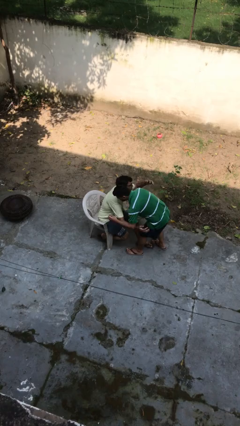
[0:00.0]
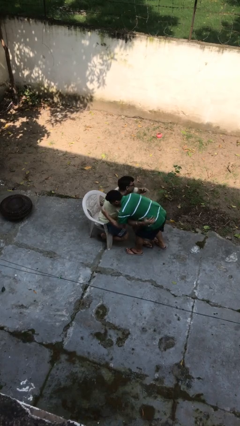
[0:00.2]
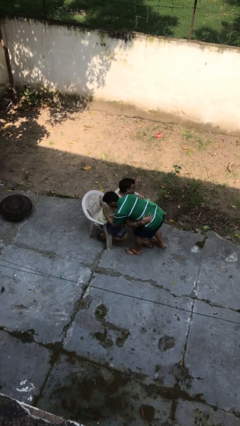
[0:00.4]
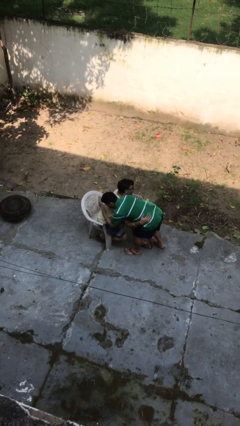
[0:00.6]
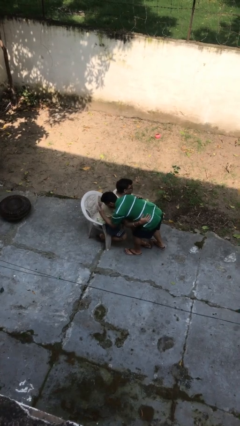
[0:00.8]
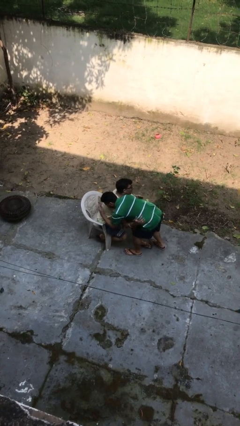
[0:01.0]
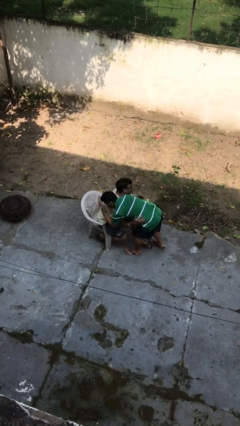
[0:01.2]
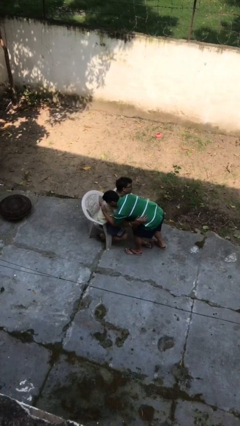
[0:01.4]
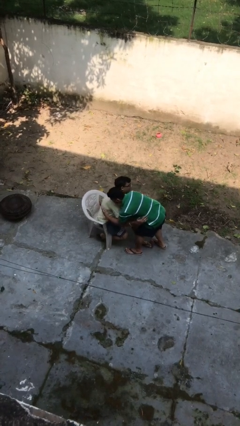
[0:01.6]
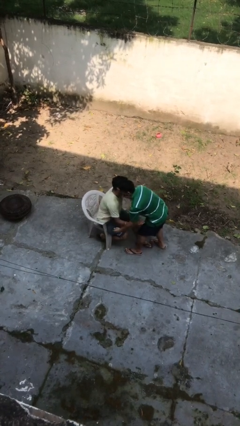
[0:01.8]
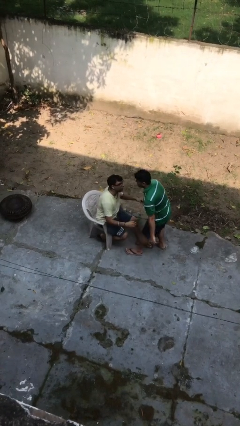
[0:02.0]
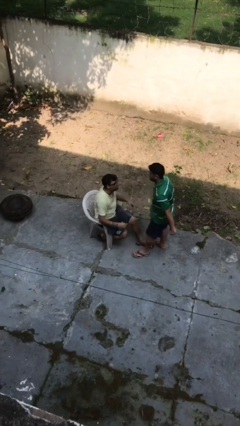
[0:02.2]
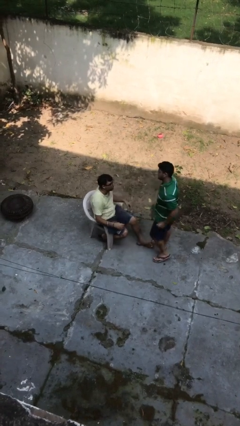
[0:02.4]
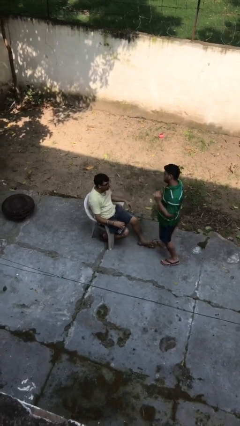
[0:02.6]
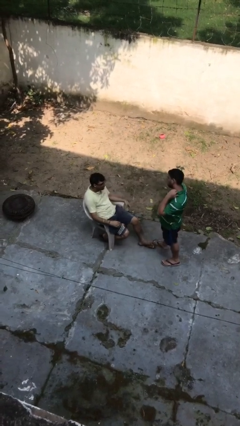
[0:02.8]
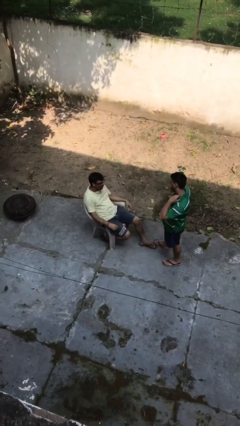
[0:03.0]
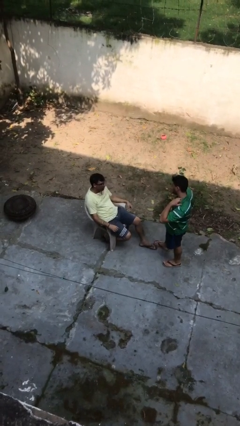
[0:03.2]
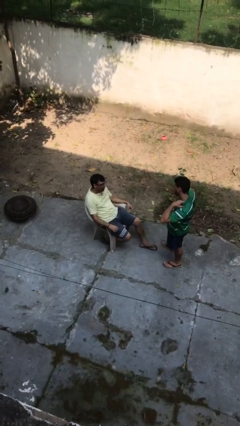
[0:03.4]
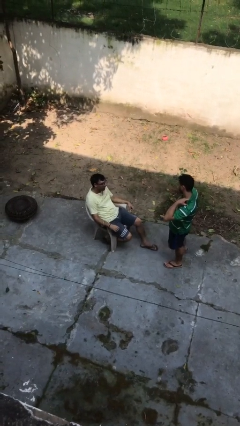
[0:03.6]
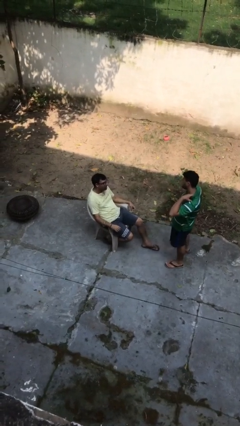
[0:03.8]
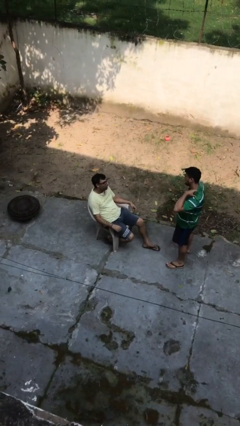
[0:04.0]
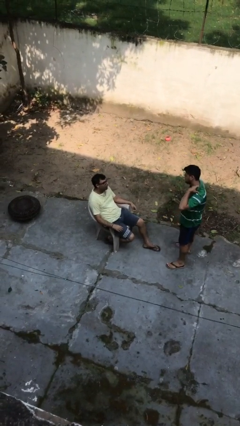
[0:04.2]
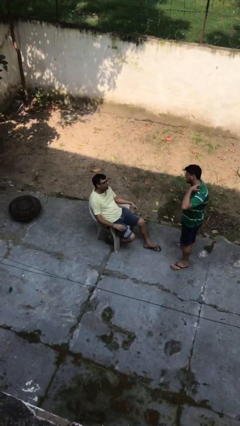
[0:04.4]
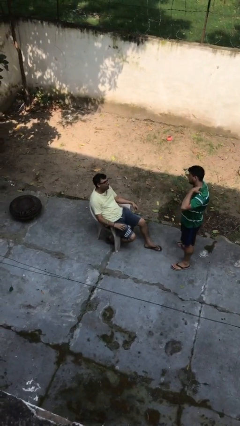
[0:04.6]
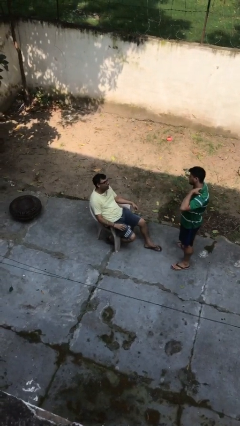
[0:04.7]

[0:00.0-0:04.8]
person embraces person

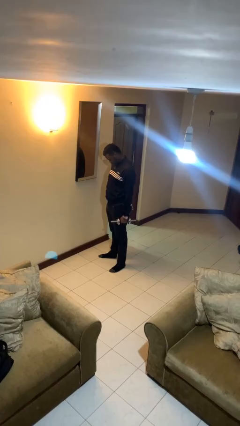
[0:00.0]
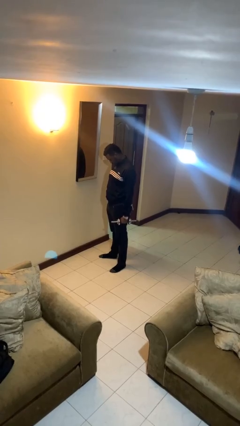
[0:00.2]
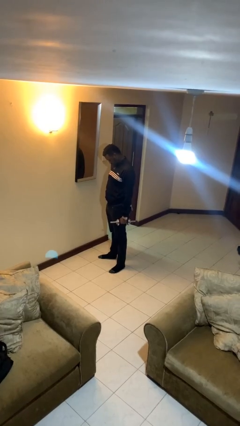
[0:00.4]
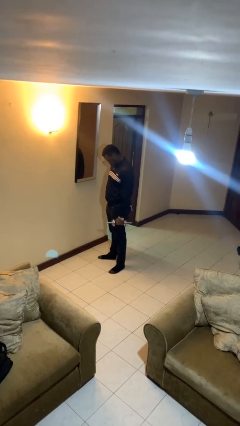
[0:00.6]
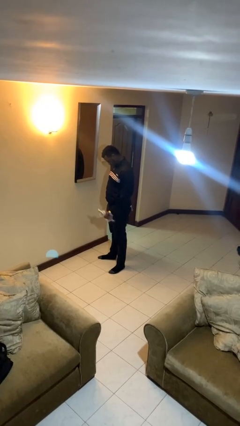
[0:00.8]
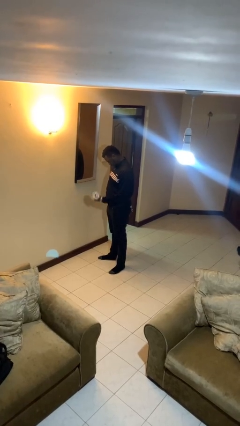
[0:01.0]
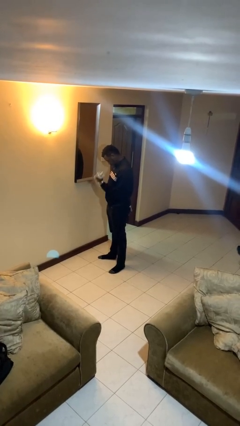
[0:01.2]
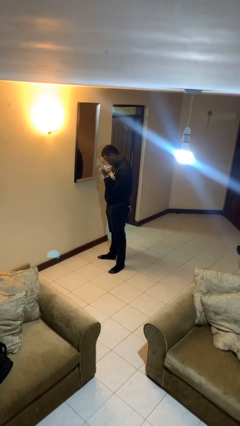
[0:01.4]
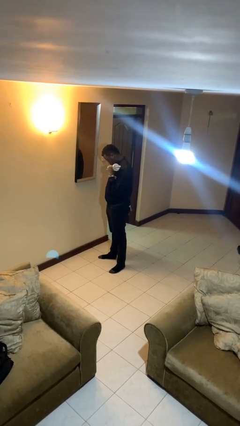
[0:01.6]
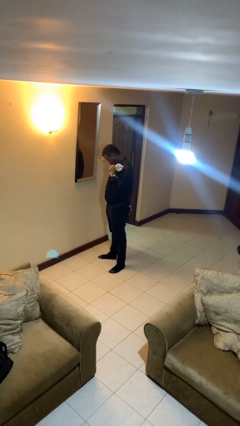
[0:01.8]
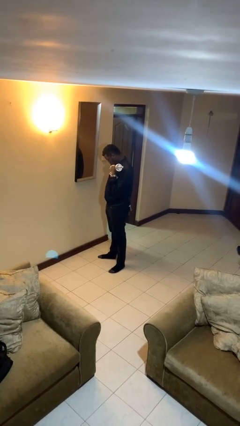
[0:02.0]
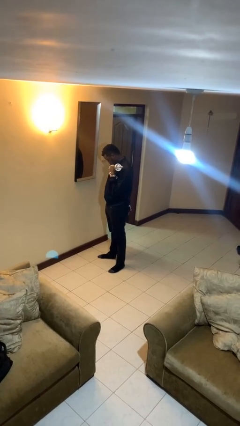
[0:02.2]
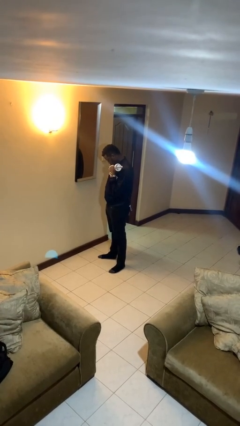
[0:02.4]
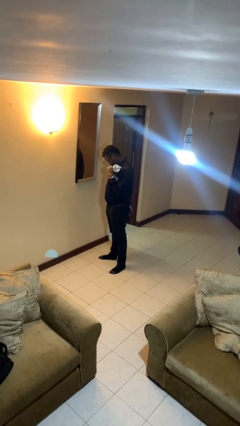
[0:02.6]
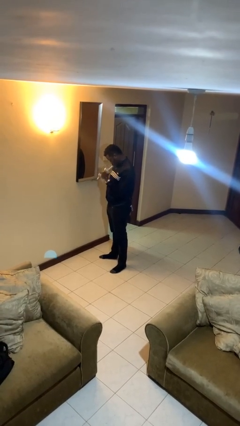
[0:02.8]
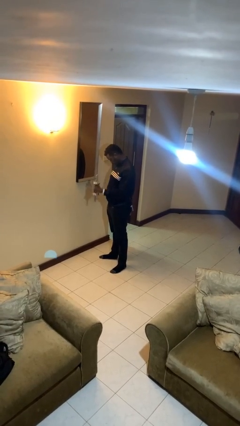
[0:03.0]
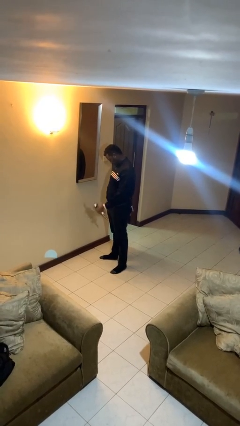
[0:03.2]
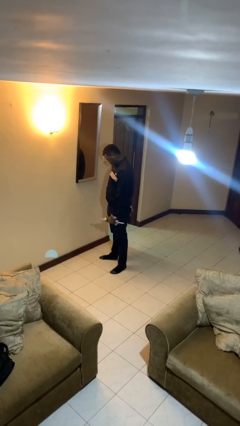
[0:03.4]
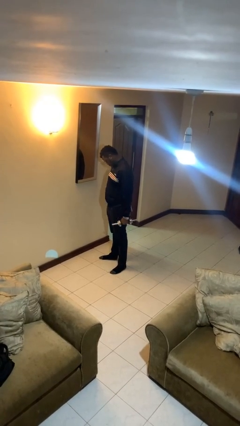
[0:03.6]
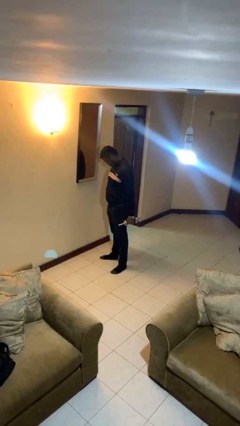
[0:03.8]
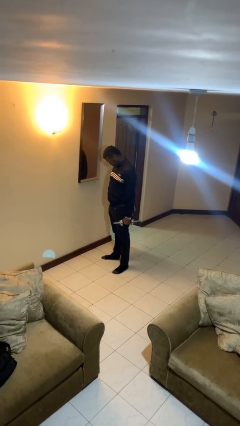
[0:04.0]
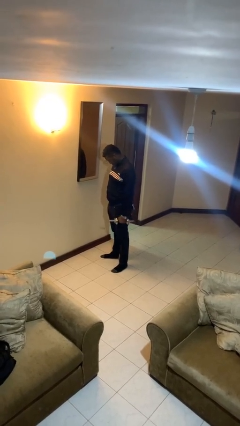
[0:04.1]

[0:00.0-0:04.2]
person lifts dumbbells

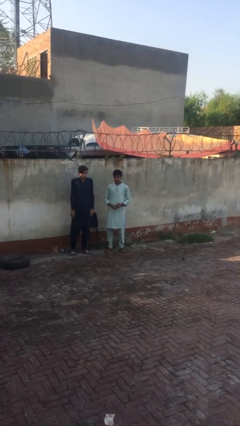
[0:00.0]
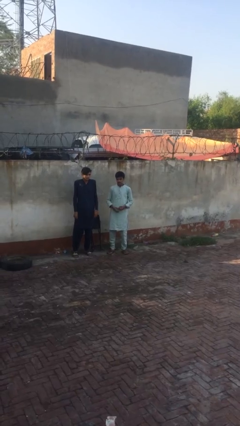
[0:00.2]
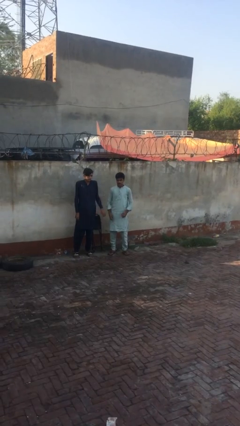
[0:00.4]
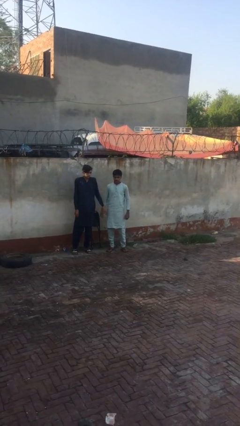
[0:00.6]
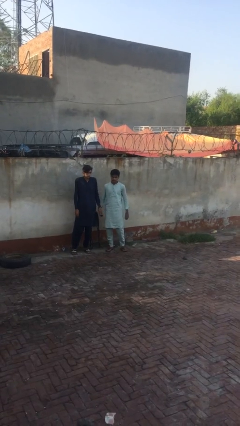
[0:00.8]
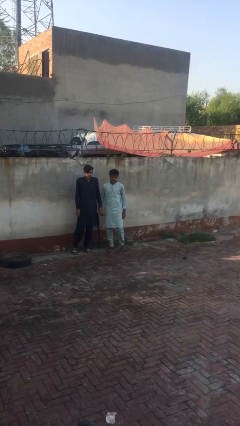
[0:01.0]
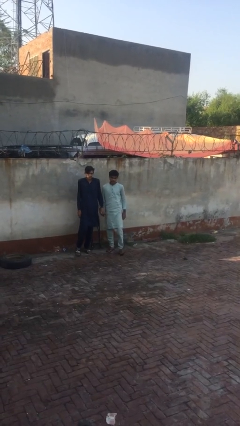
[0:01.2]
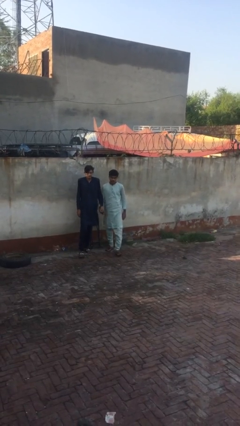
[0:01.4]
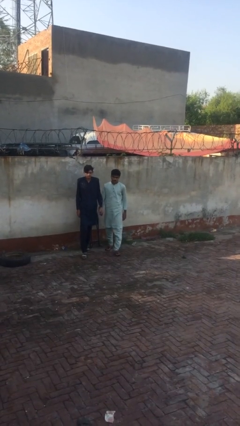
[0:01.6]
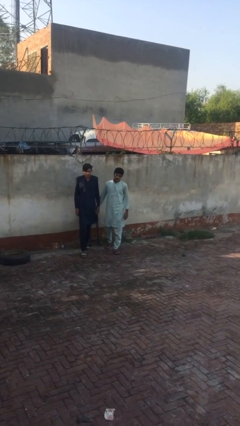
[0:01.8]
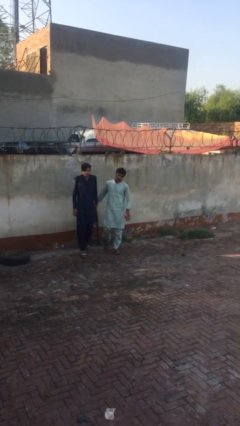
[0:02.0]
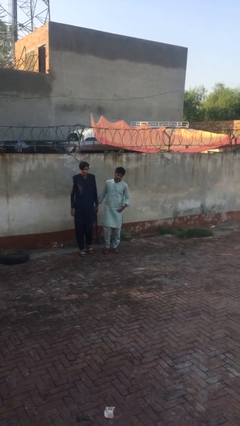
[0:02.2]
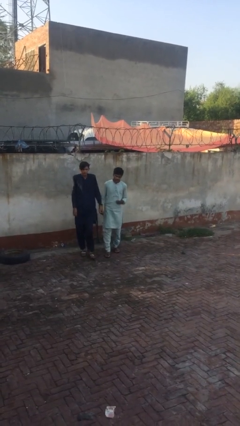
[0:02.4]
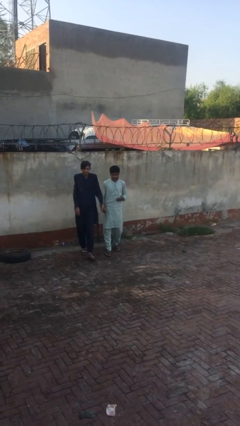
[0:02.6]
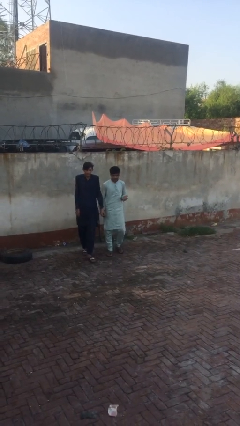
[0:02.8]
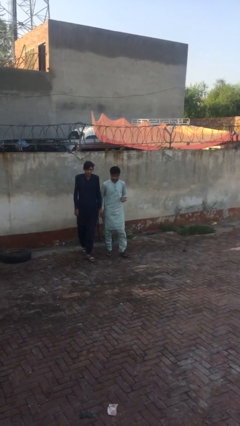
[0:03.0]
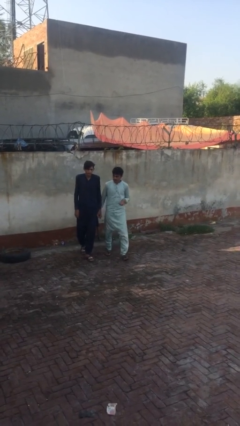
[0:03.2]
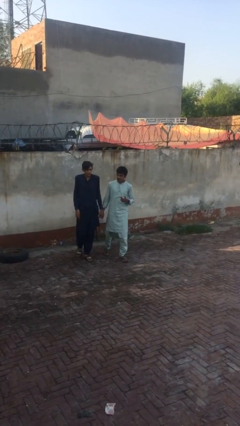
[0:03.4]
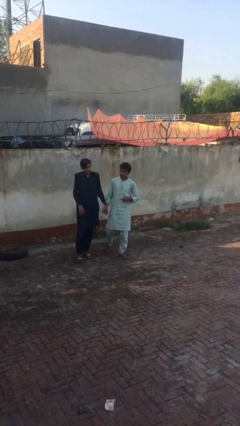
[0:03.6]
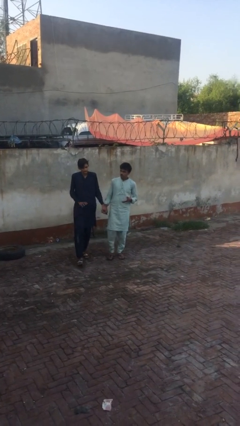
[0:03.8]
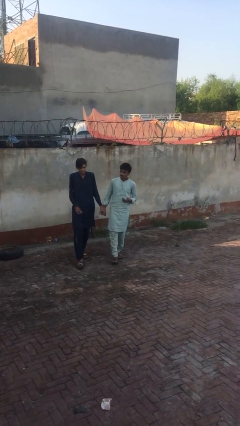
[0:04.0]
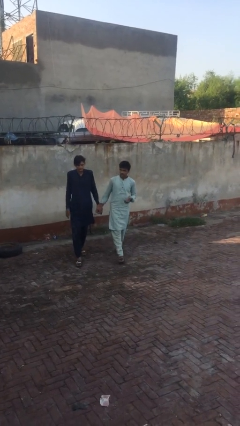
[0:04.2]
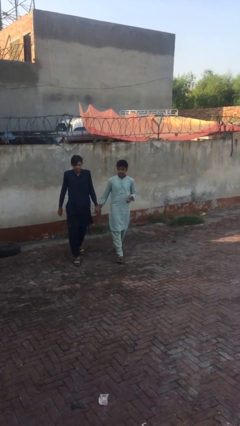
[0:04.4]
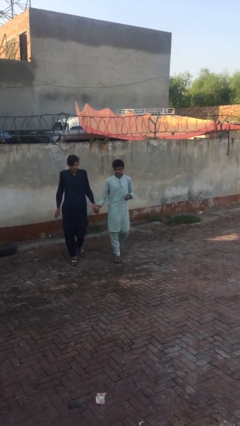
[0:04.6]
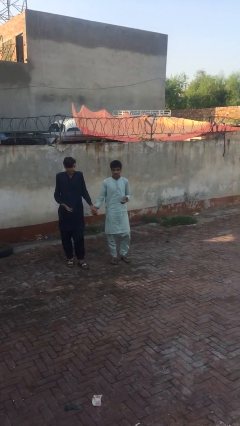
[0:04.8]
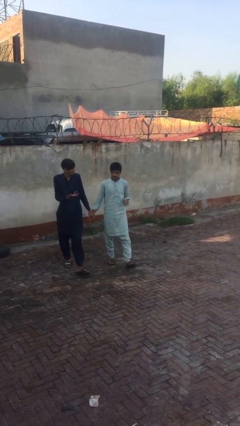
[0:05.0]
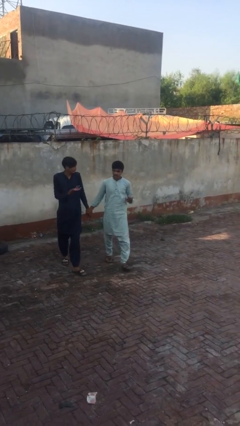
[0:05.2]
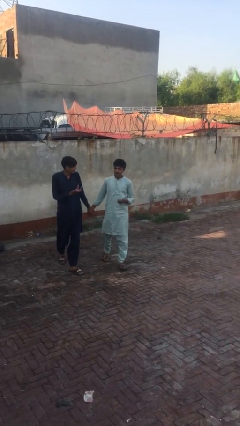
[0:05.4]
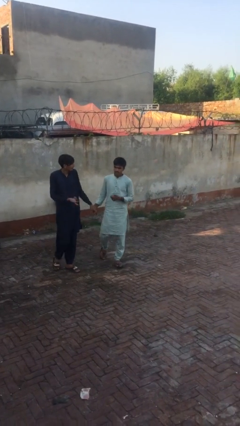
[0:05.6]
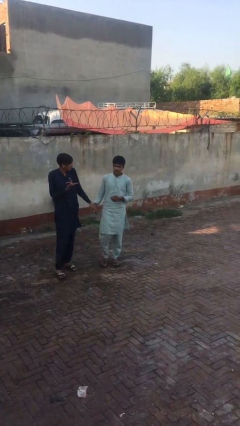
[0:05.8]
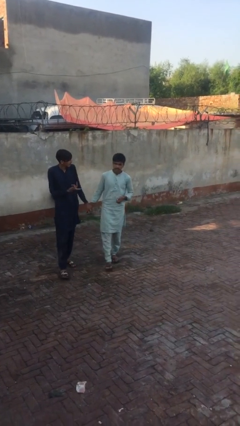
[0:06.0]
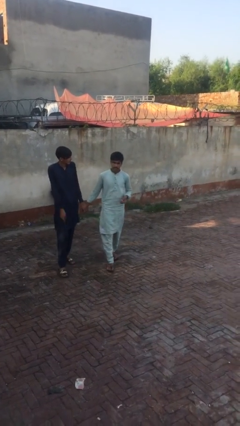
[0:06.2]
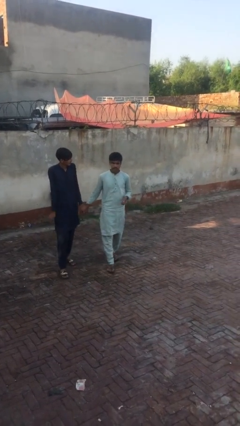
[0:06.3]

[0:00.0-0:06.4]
person holds hand

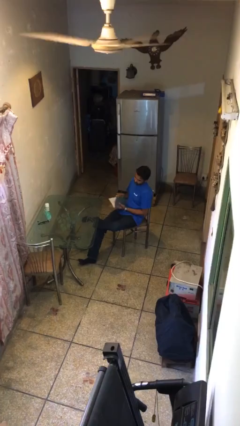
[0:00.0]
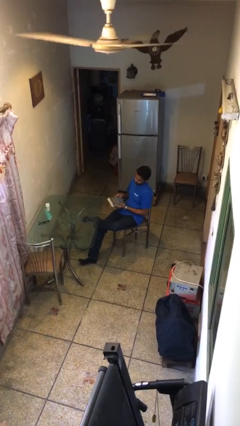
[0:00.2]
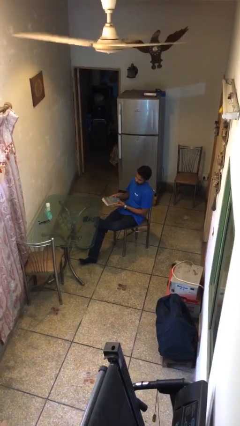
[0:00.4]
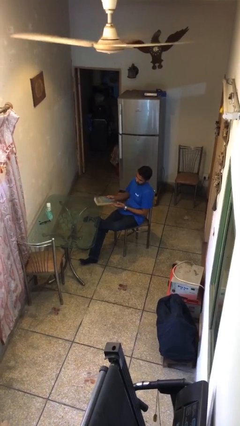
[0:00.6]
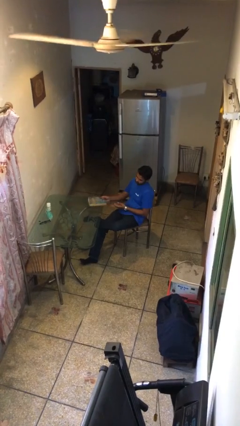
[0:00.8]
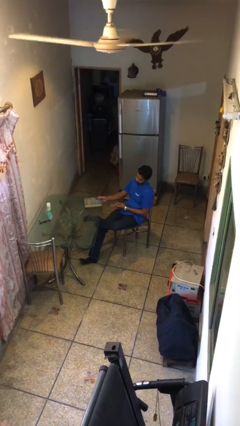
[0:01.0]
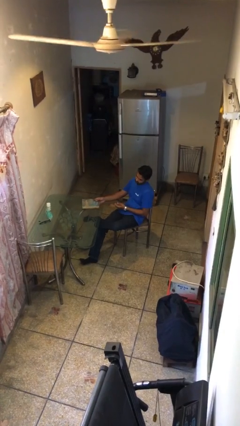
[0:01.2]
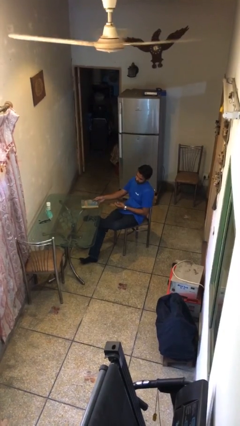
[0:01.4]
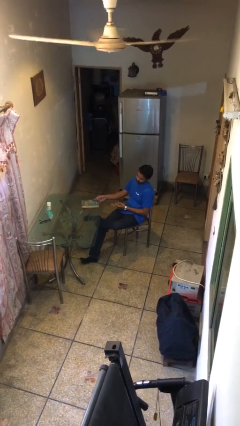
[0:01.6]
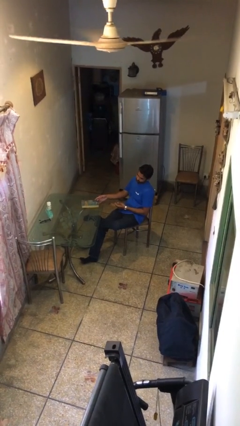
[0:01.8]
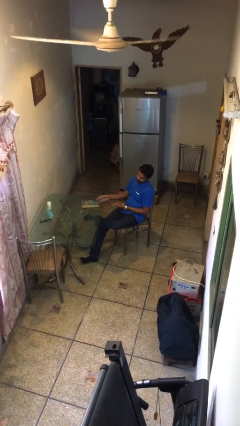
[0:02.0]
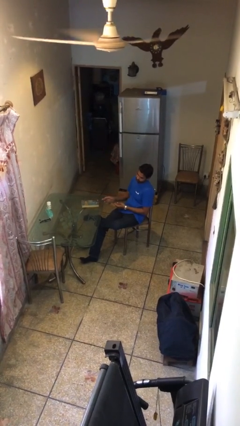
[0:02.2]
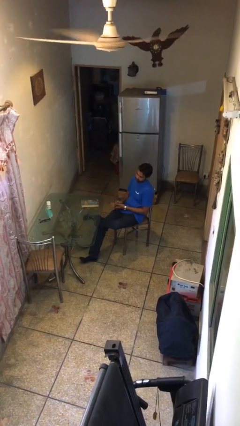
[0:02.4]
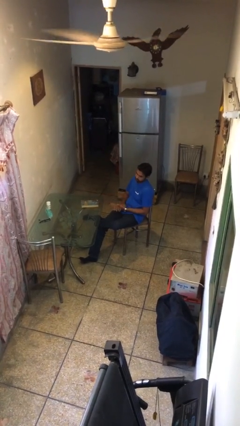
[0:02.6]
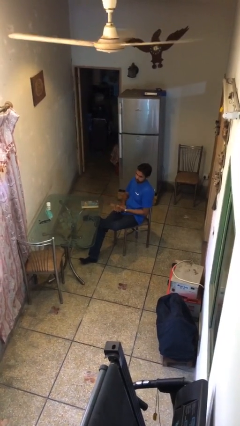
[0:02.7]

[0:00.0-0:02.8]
person puts down object on table
